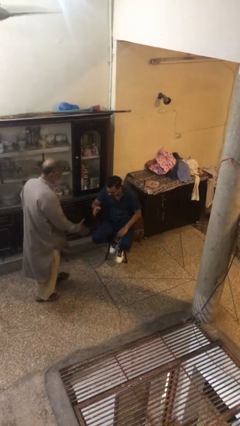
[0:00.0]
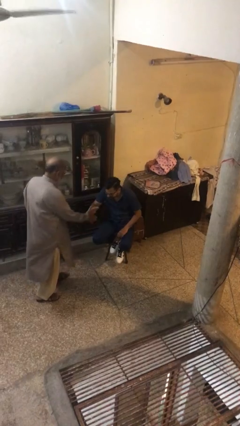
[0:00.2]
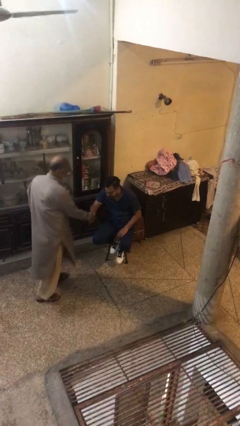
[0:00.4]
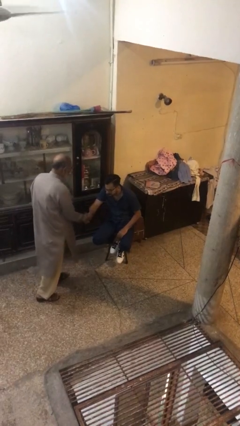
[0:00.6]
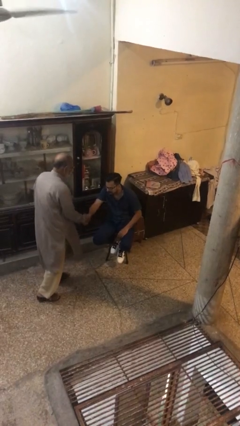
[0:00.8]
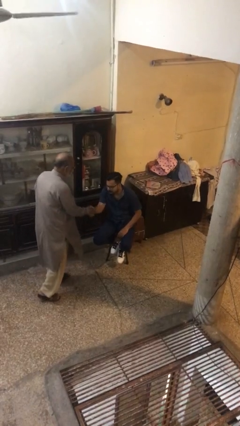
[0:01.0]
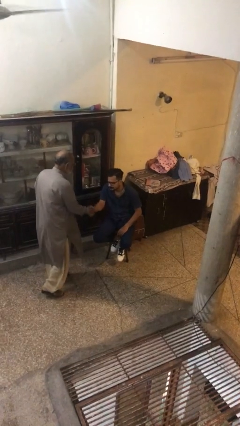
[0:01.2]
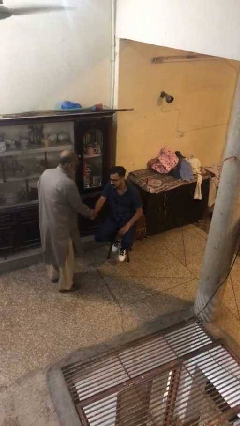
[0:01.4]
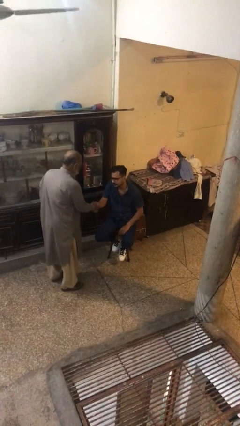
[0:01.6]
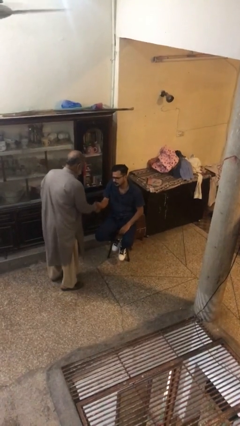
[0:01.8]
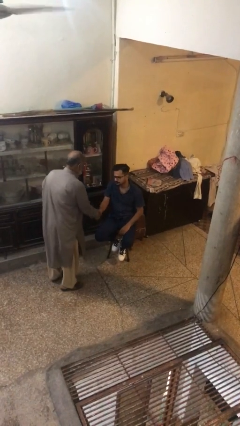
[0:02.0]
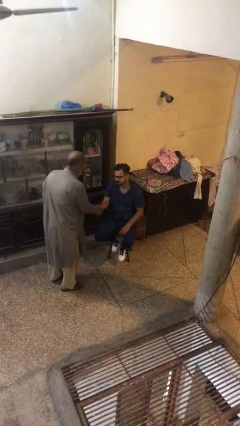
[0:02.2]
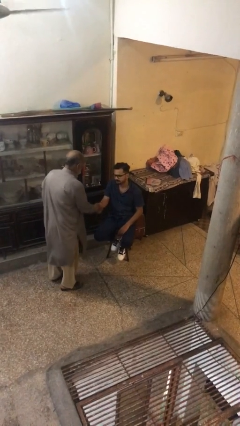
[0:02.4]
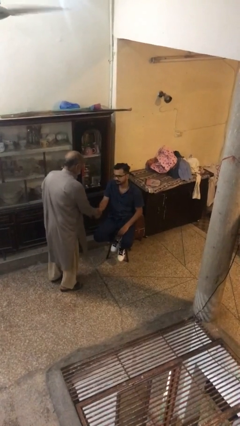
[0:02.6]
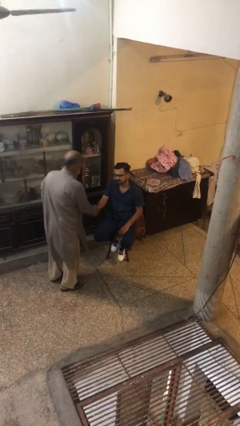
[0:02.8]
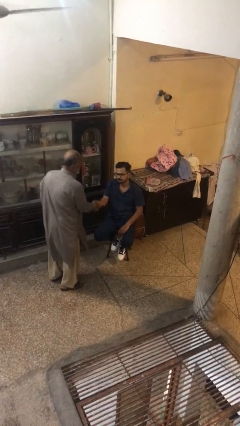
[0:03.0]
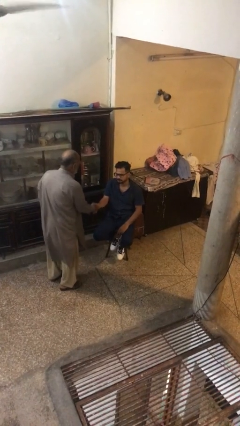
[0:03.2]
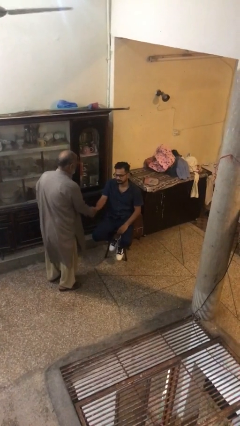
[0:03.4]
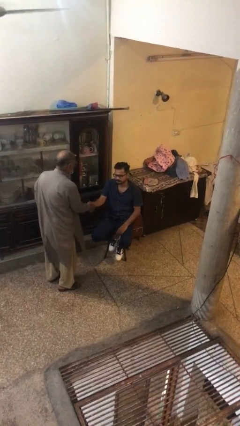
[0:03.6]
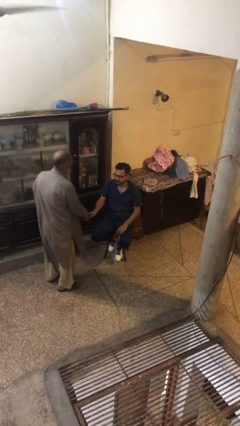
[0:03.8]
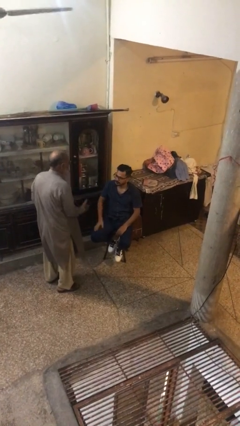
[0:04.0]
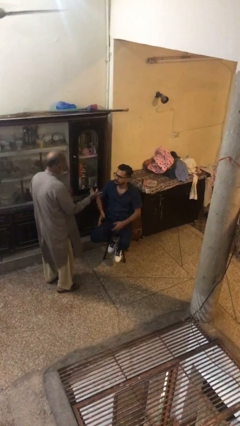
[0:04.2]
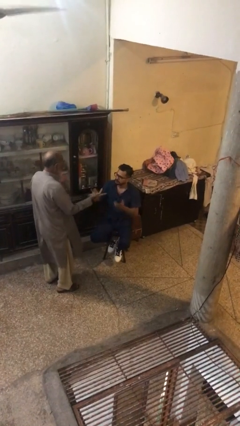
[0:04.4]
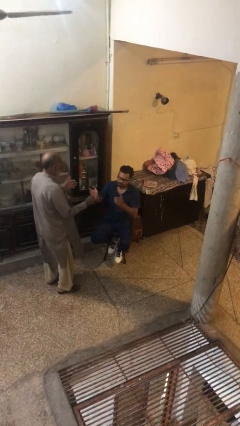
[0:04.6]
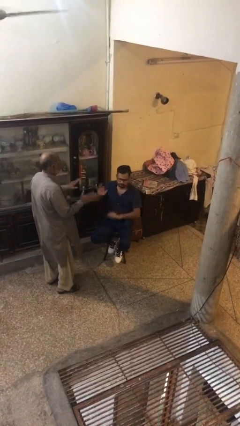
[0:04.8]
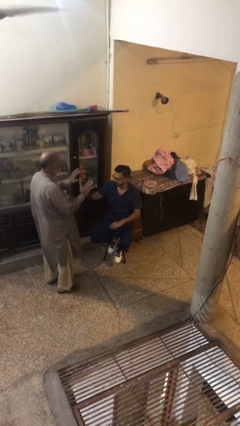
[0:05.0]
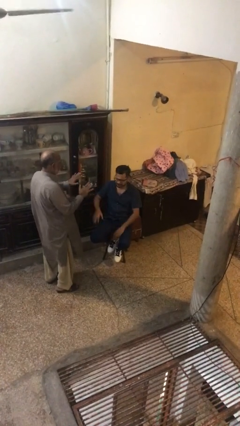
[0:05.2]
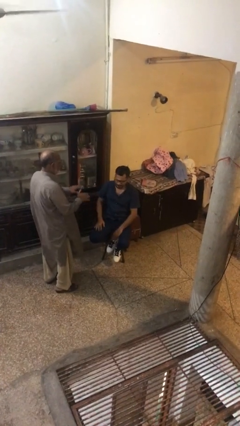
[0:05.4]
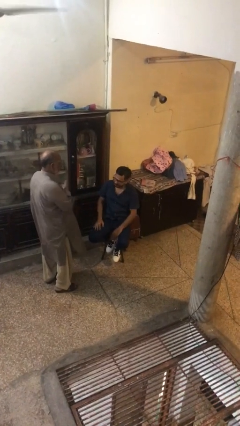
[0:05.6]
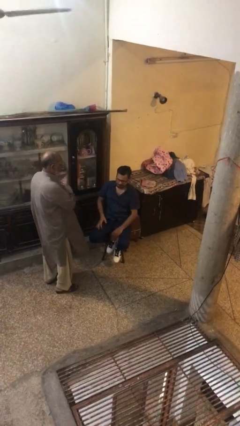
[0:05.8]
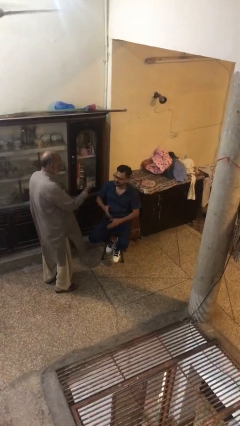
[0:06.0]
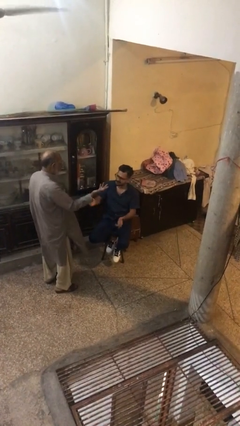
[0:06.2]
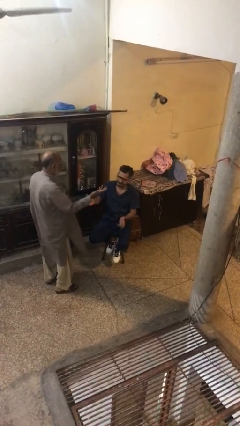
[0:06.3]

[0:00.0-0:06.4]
person shakes hand

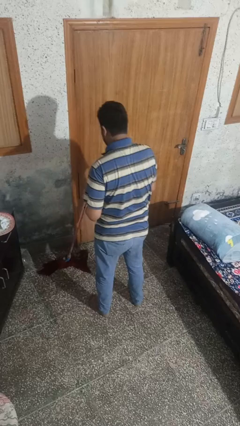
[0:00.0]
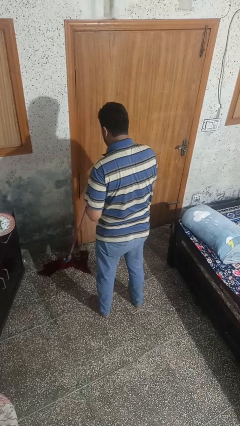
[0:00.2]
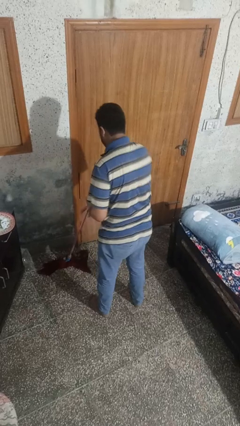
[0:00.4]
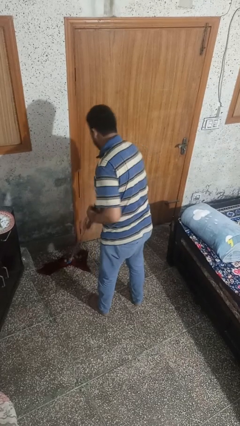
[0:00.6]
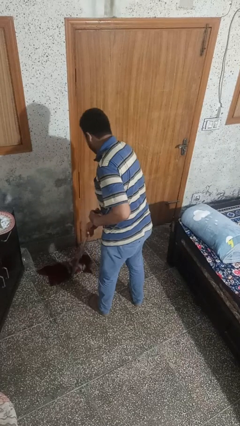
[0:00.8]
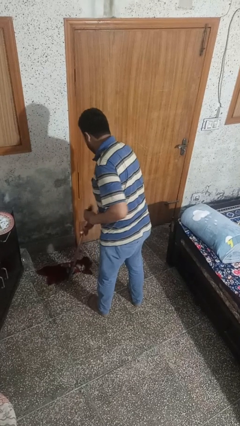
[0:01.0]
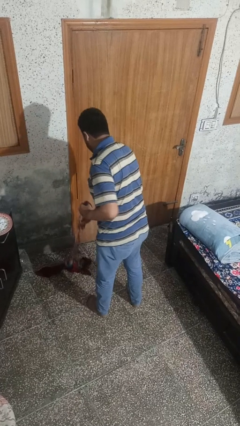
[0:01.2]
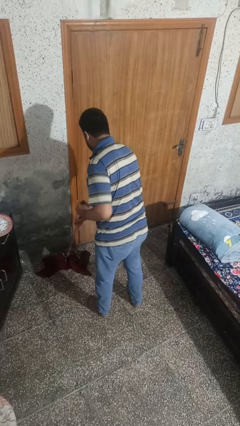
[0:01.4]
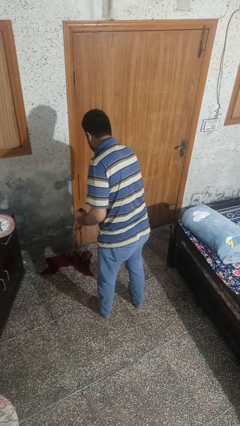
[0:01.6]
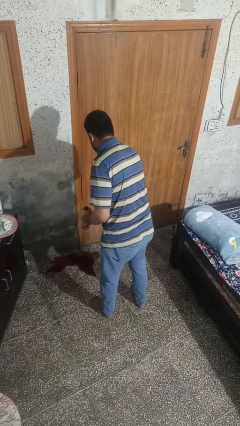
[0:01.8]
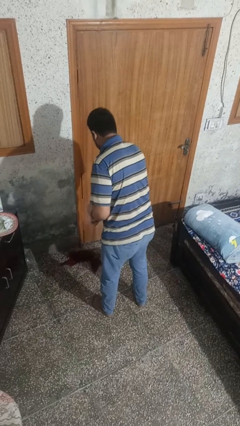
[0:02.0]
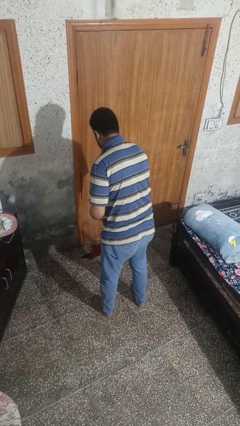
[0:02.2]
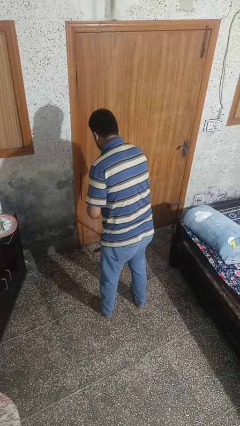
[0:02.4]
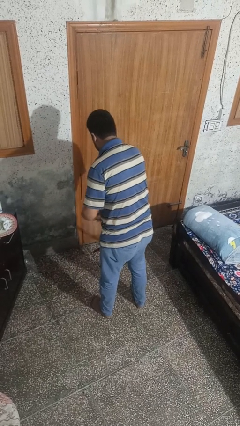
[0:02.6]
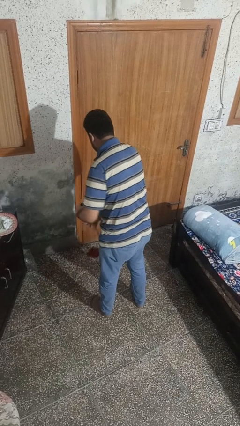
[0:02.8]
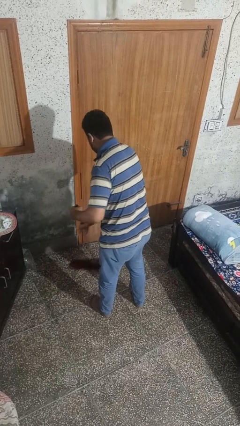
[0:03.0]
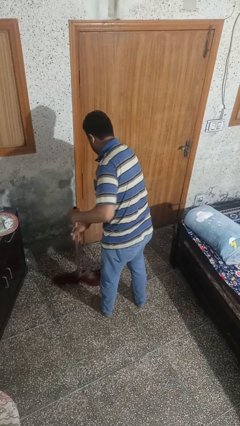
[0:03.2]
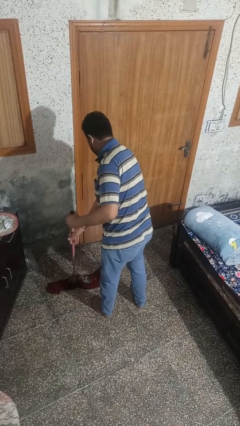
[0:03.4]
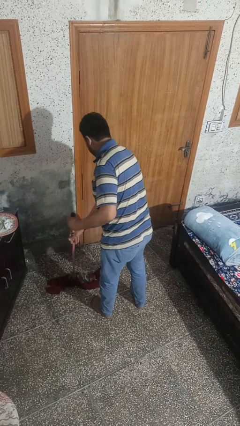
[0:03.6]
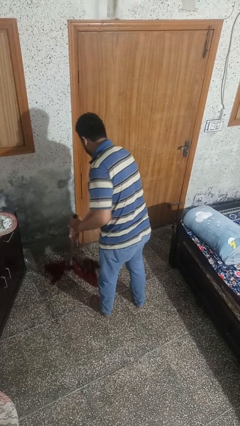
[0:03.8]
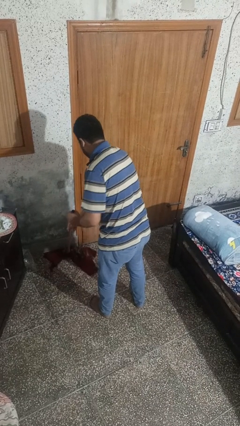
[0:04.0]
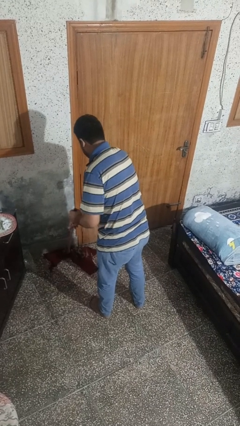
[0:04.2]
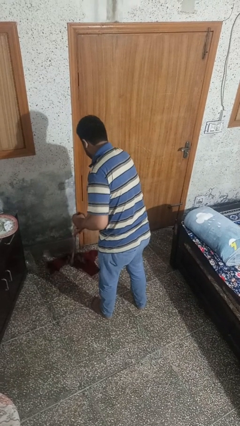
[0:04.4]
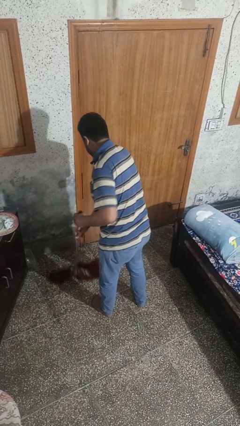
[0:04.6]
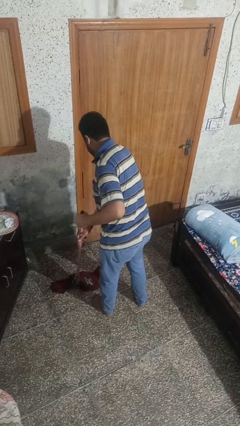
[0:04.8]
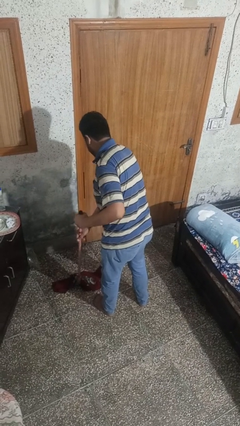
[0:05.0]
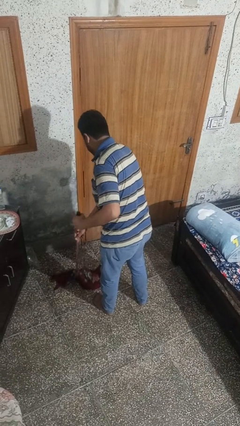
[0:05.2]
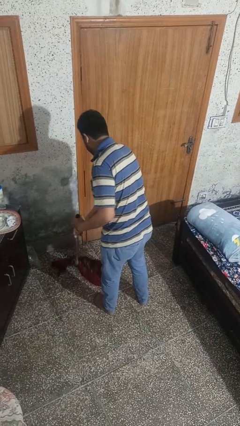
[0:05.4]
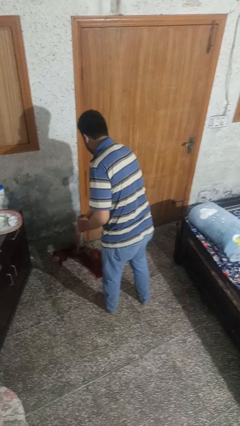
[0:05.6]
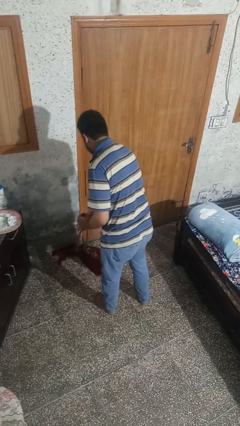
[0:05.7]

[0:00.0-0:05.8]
person mops

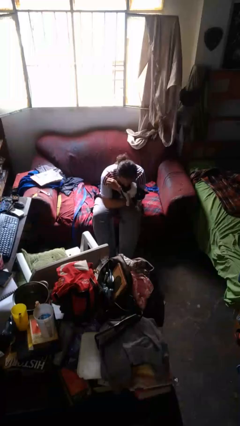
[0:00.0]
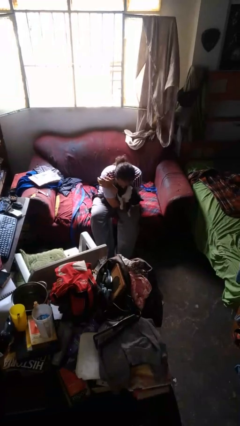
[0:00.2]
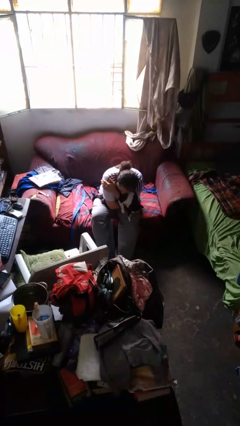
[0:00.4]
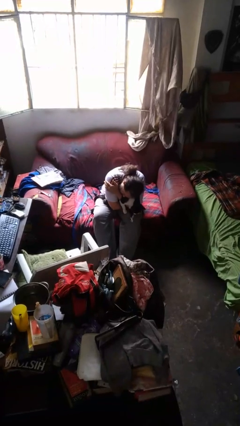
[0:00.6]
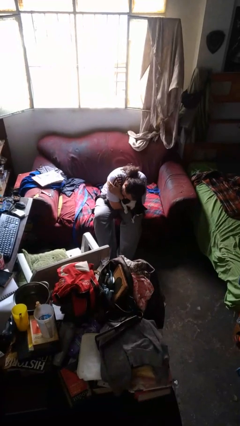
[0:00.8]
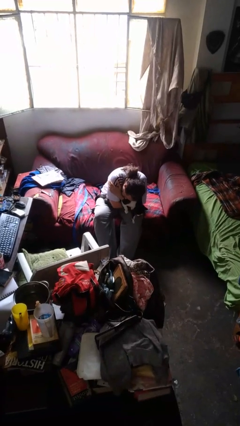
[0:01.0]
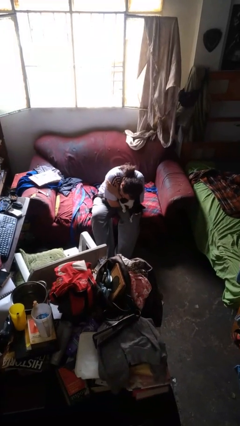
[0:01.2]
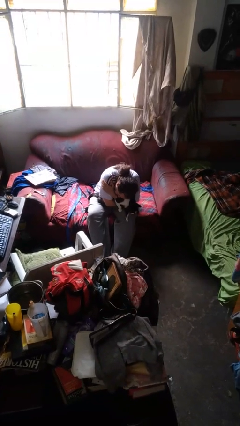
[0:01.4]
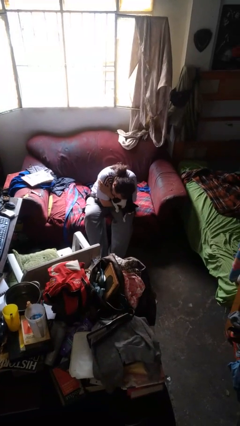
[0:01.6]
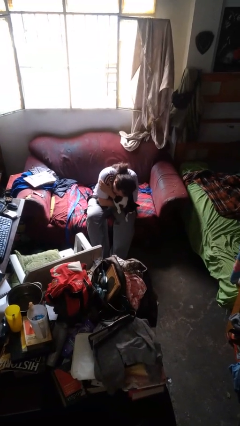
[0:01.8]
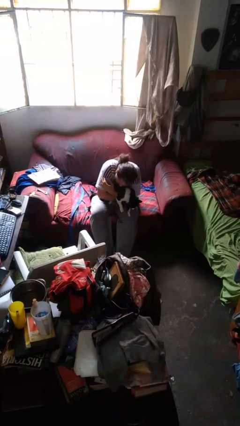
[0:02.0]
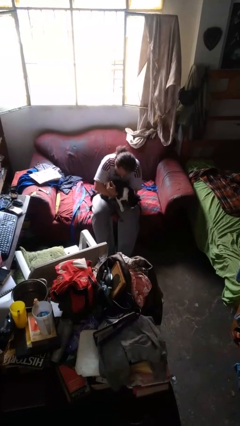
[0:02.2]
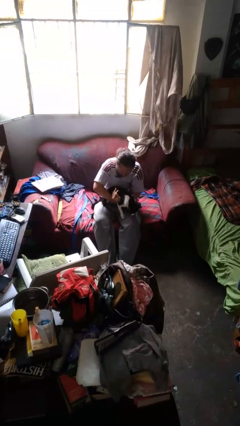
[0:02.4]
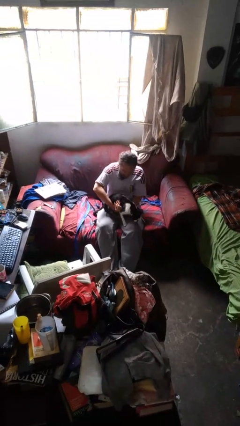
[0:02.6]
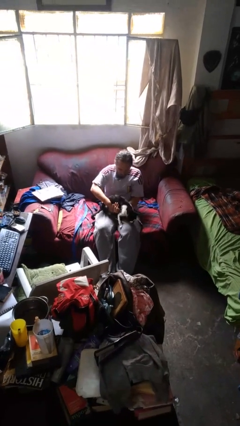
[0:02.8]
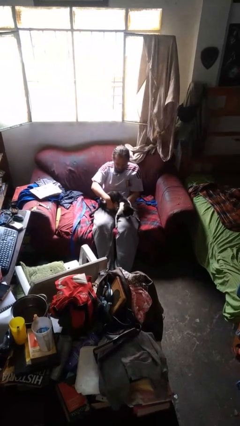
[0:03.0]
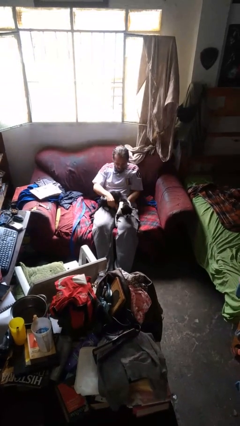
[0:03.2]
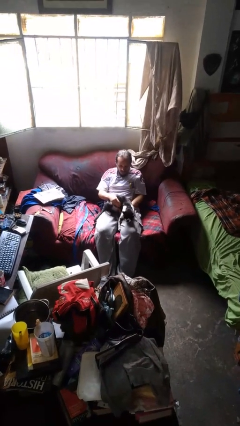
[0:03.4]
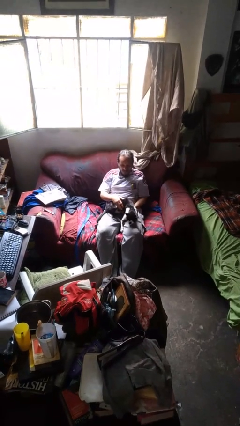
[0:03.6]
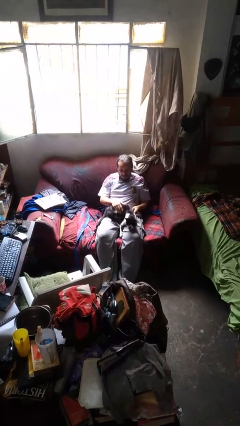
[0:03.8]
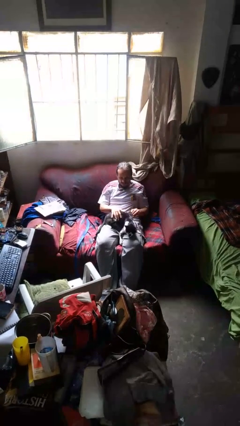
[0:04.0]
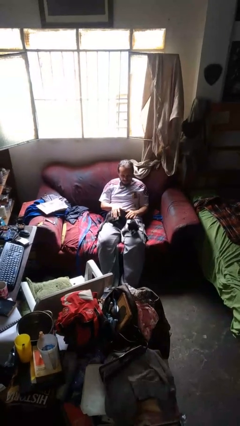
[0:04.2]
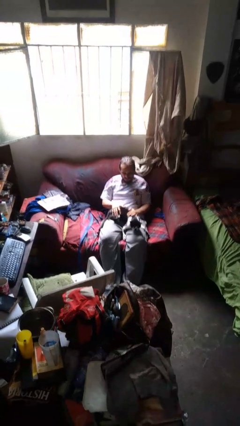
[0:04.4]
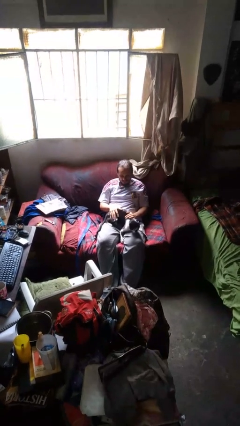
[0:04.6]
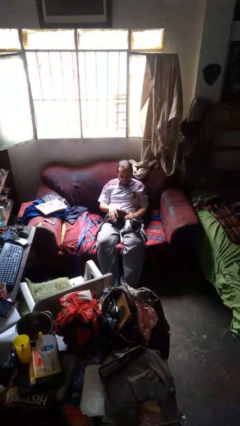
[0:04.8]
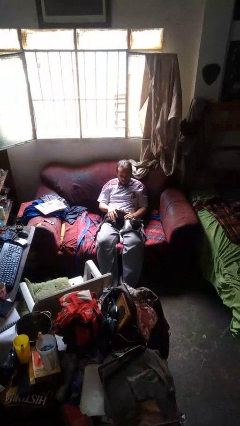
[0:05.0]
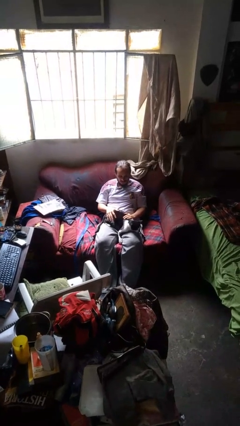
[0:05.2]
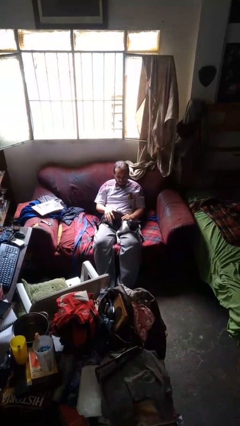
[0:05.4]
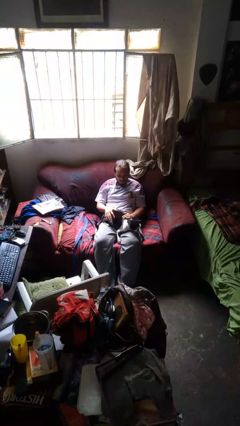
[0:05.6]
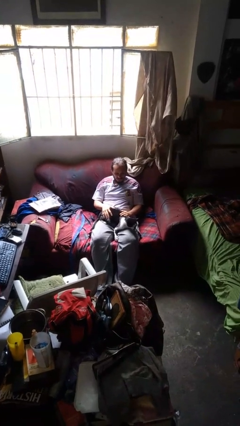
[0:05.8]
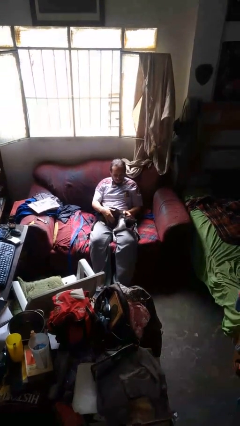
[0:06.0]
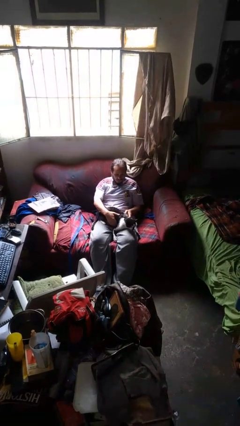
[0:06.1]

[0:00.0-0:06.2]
person hugs dog
